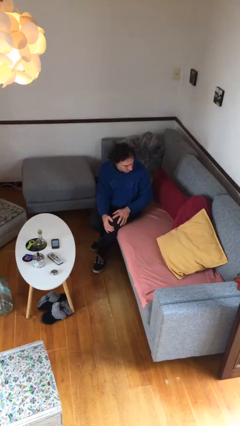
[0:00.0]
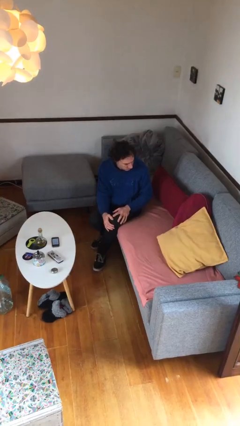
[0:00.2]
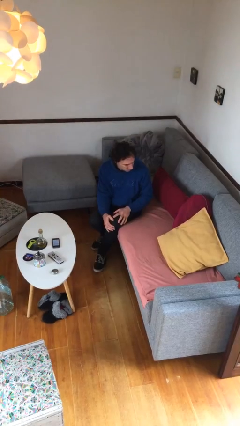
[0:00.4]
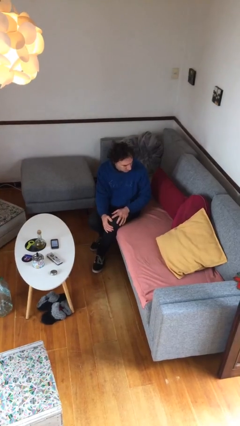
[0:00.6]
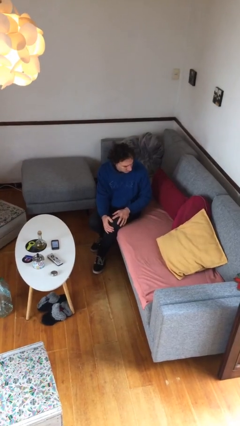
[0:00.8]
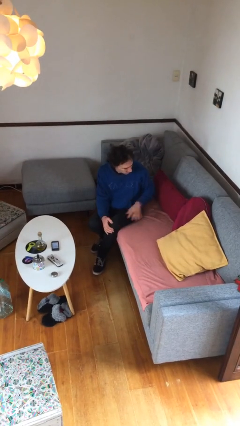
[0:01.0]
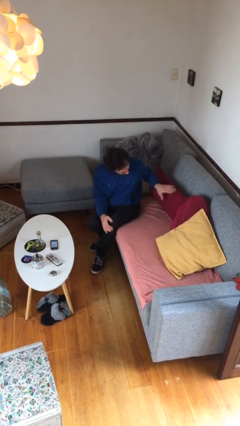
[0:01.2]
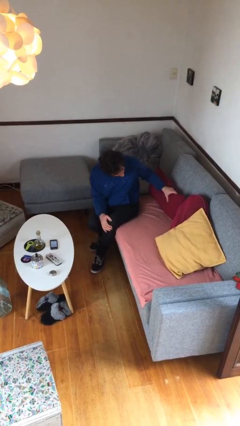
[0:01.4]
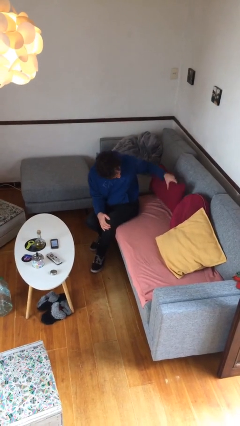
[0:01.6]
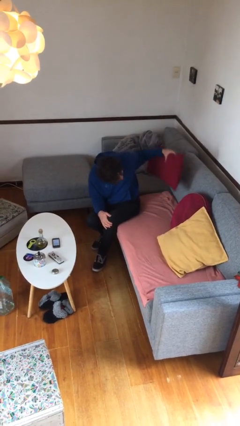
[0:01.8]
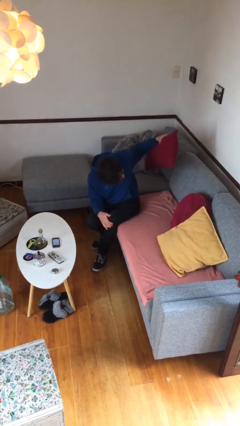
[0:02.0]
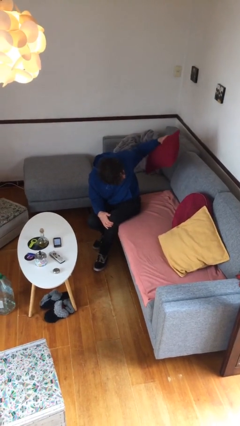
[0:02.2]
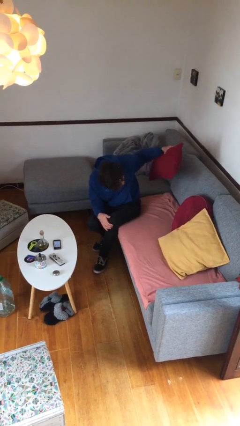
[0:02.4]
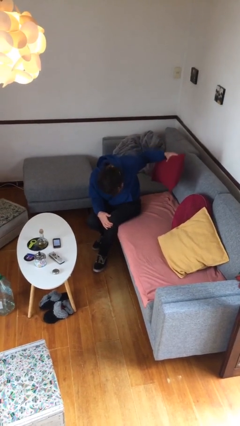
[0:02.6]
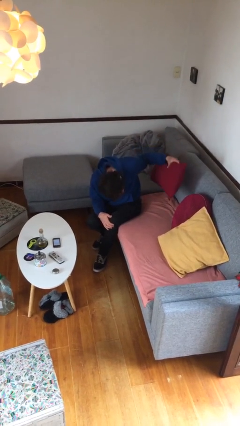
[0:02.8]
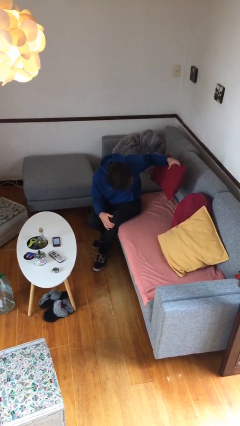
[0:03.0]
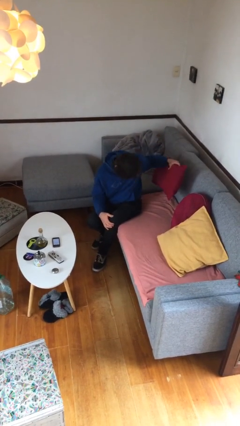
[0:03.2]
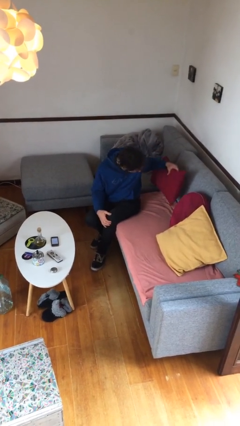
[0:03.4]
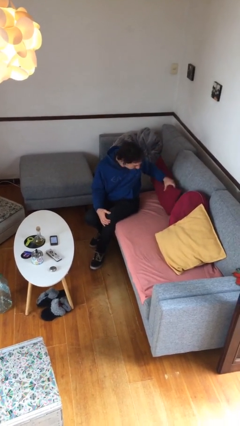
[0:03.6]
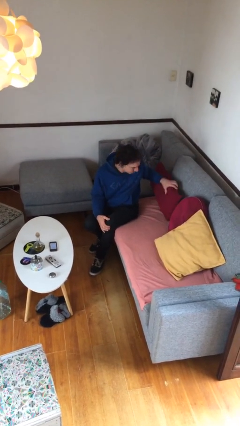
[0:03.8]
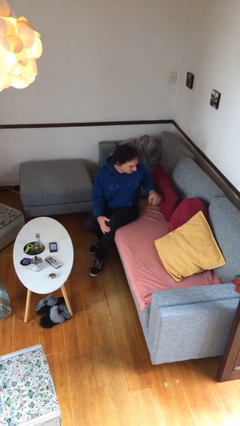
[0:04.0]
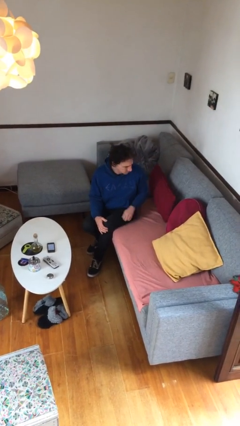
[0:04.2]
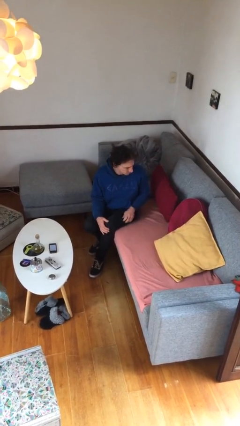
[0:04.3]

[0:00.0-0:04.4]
person searches in couch

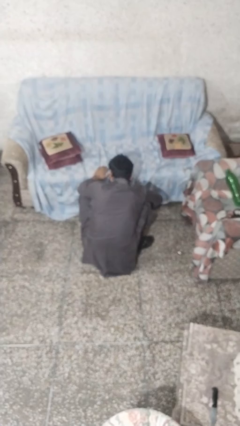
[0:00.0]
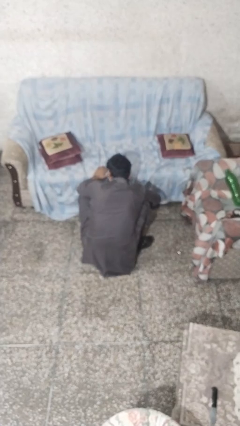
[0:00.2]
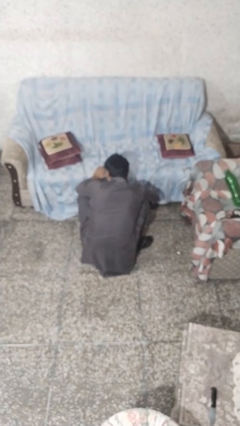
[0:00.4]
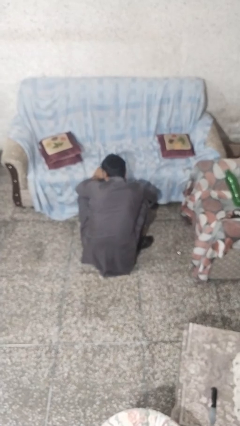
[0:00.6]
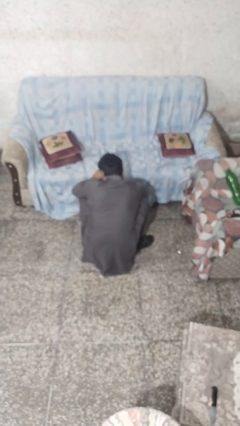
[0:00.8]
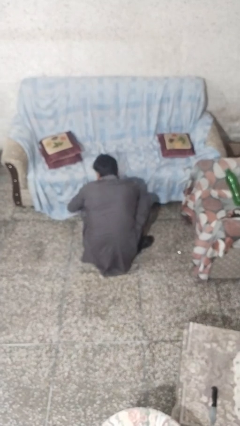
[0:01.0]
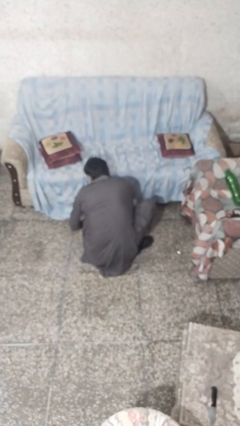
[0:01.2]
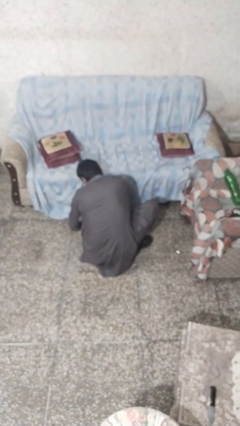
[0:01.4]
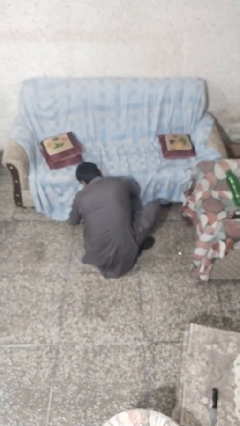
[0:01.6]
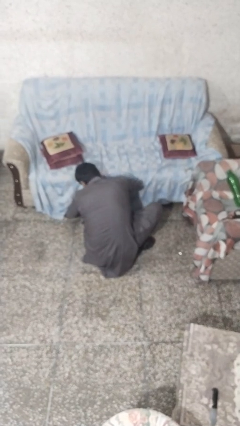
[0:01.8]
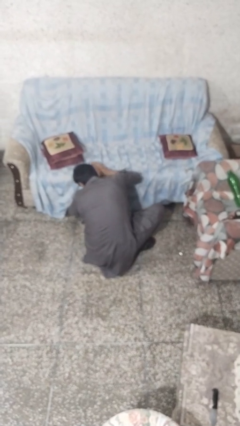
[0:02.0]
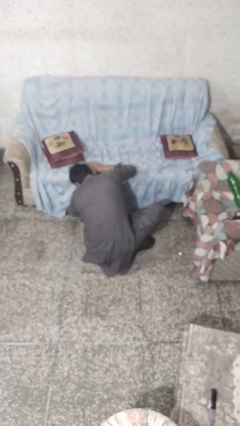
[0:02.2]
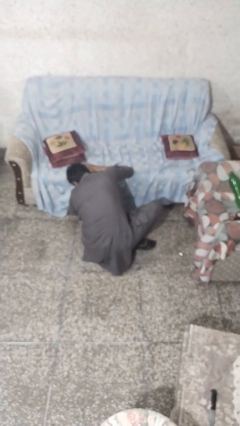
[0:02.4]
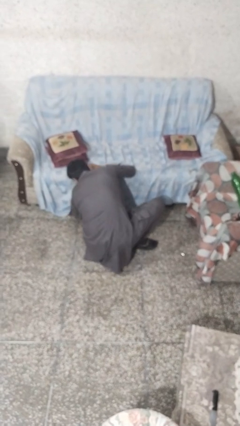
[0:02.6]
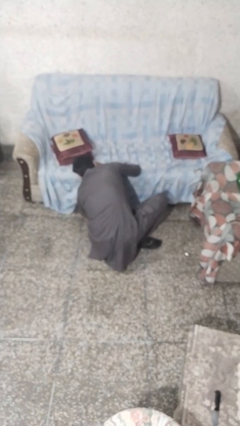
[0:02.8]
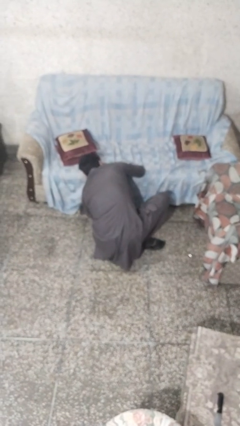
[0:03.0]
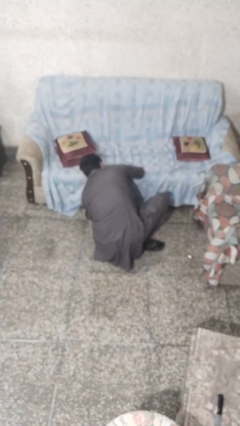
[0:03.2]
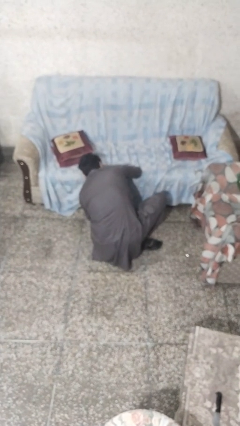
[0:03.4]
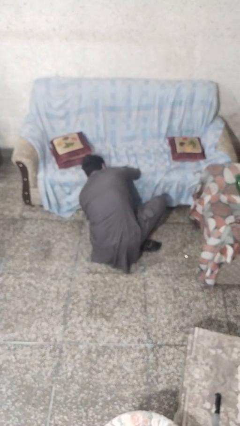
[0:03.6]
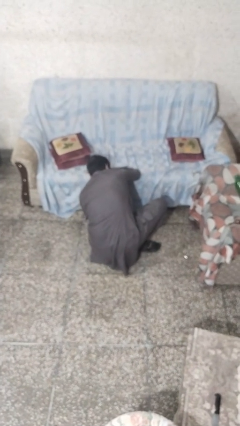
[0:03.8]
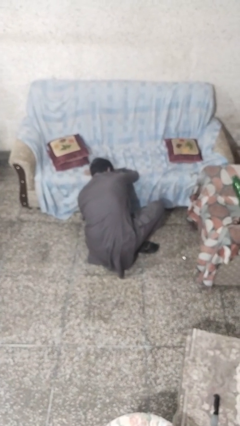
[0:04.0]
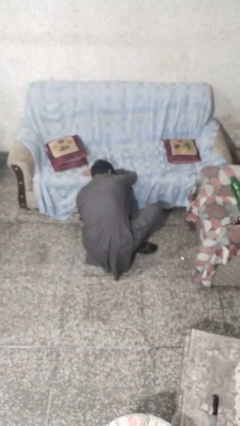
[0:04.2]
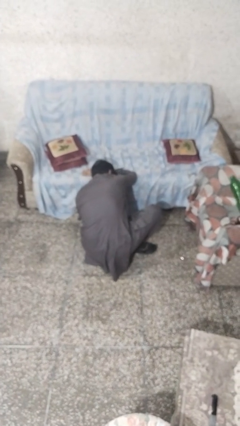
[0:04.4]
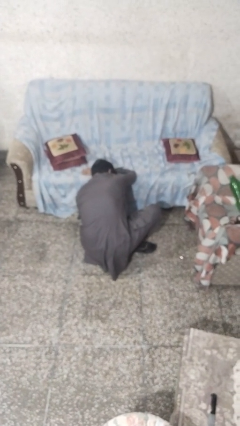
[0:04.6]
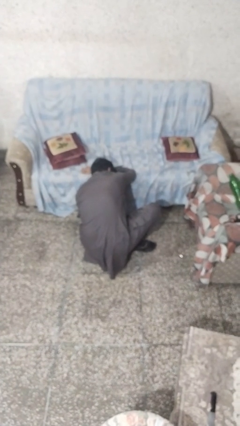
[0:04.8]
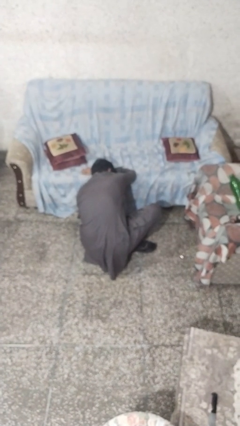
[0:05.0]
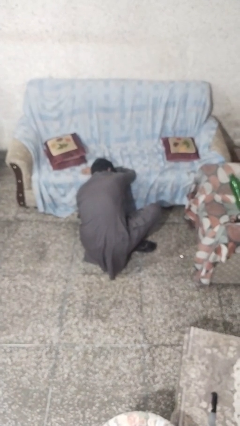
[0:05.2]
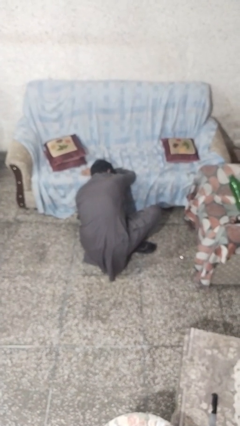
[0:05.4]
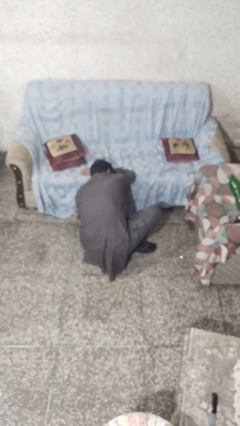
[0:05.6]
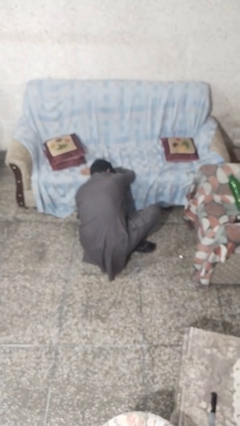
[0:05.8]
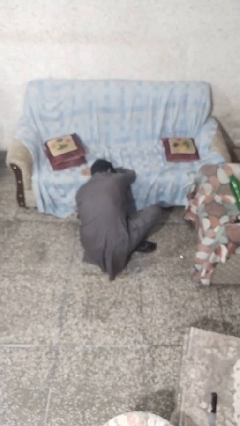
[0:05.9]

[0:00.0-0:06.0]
person searches under couch

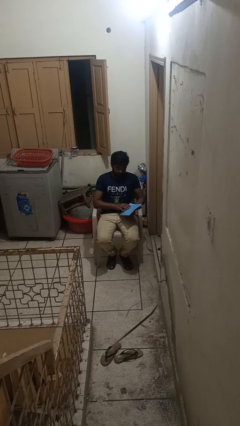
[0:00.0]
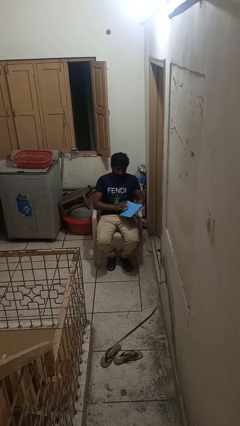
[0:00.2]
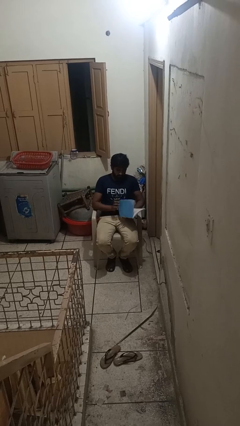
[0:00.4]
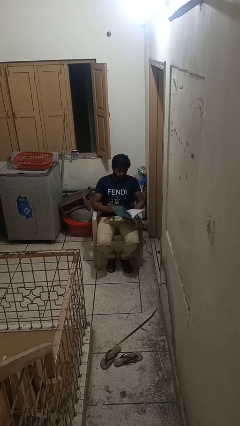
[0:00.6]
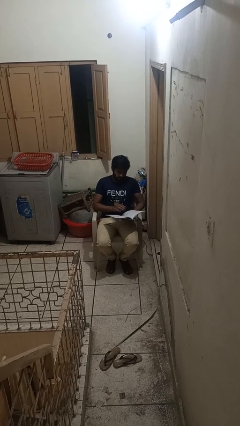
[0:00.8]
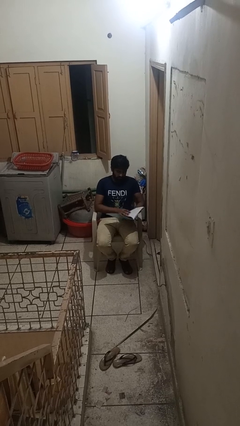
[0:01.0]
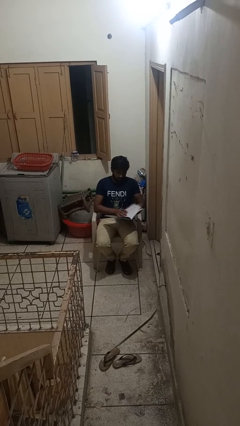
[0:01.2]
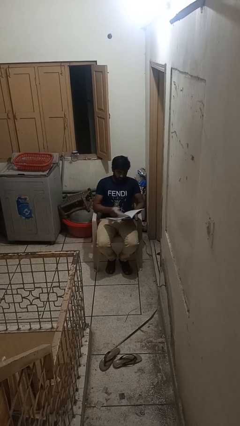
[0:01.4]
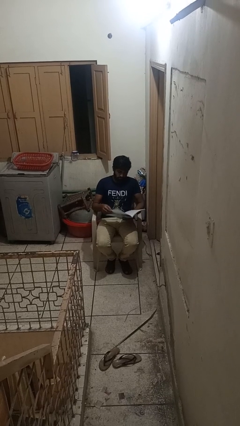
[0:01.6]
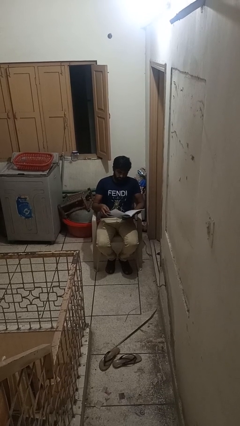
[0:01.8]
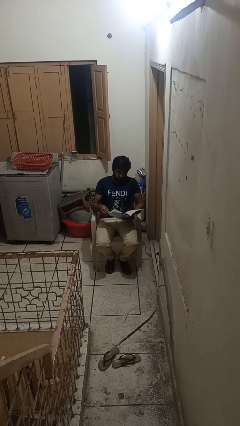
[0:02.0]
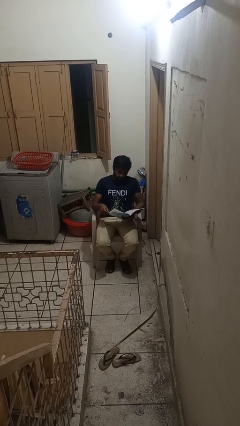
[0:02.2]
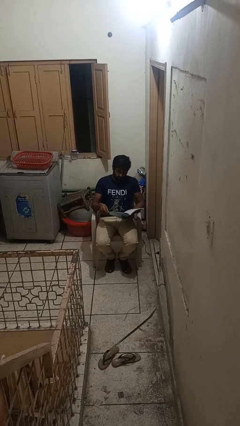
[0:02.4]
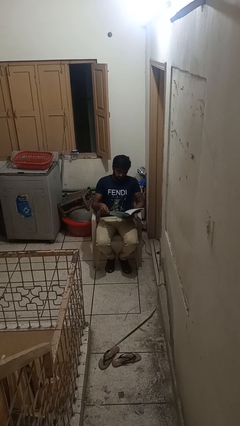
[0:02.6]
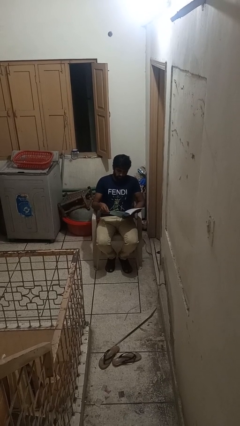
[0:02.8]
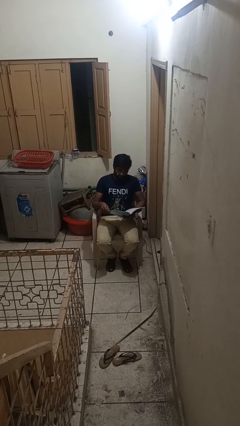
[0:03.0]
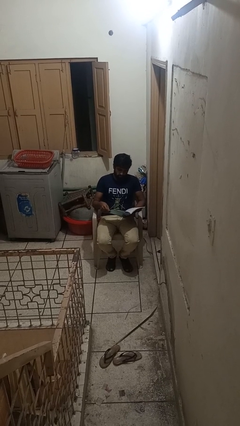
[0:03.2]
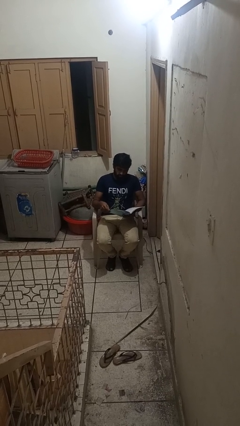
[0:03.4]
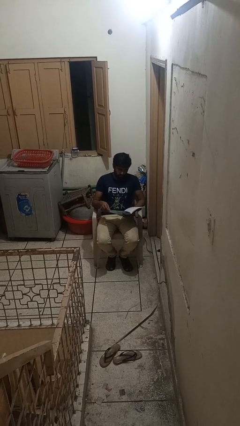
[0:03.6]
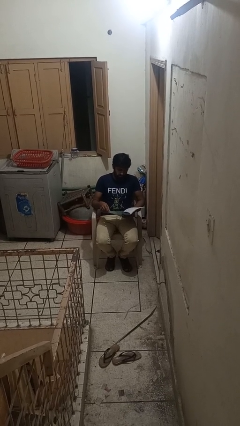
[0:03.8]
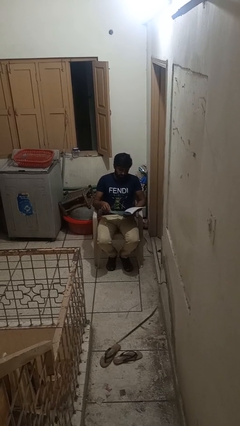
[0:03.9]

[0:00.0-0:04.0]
person reads book

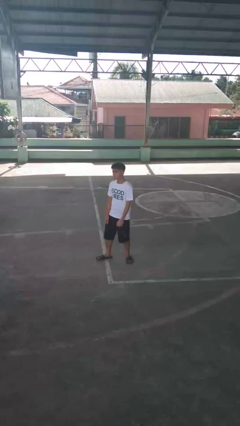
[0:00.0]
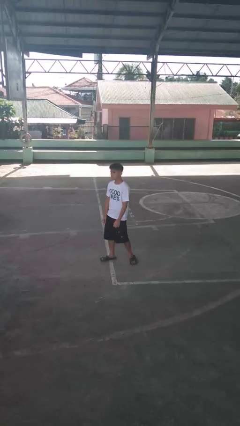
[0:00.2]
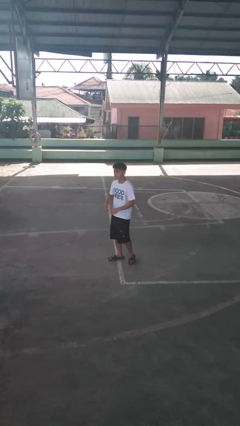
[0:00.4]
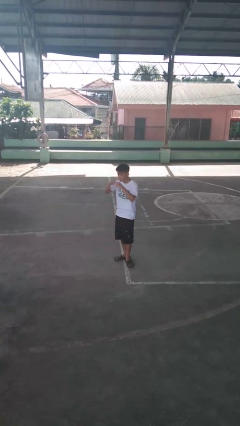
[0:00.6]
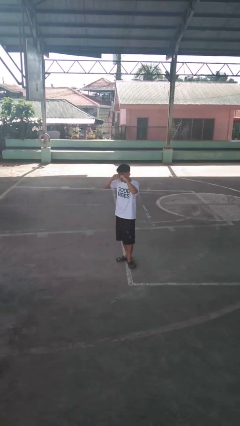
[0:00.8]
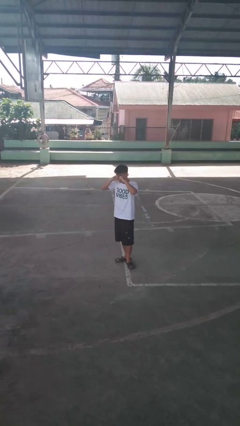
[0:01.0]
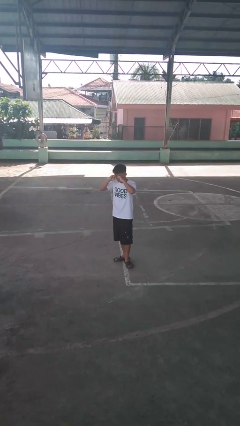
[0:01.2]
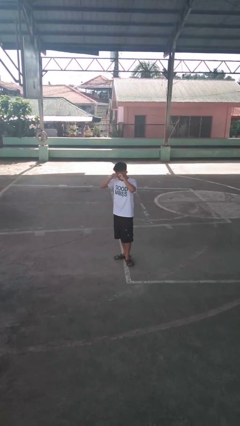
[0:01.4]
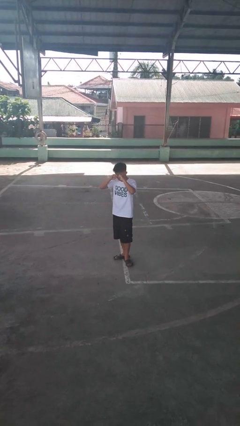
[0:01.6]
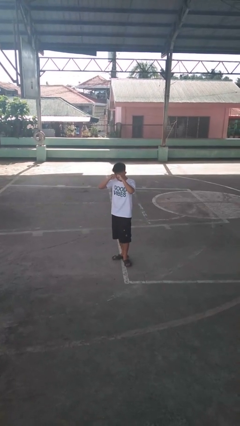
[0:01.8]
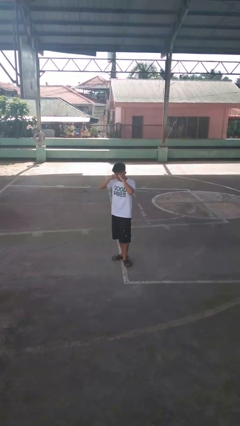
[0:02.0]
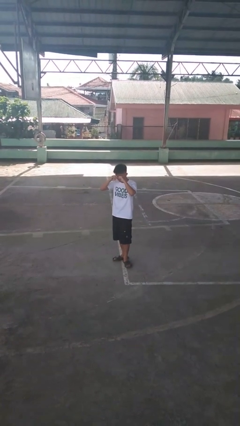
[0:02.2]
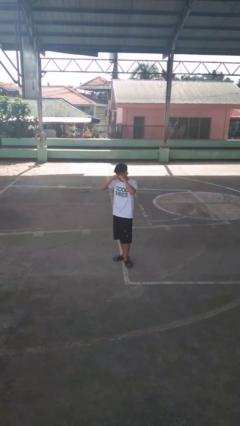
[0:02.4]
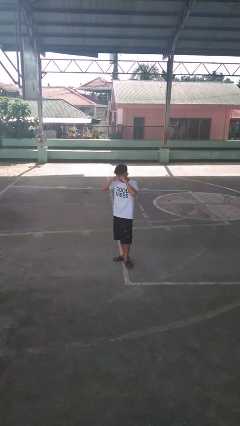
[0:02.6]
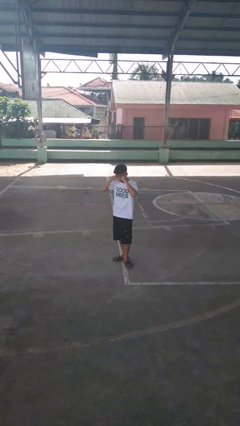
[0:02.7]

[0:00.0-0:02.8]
person rubs eyes

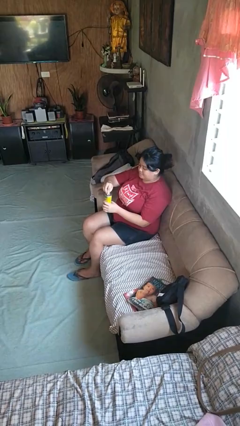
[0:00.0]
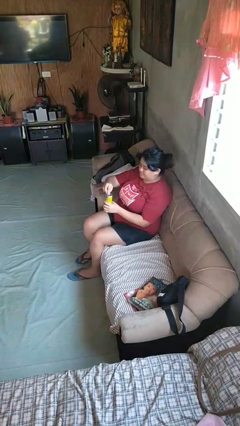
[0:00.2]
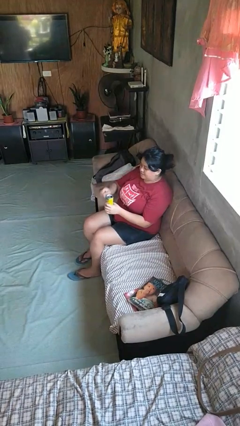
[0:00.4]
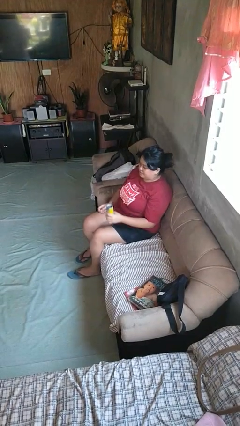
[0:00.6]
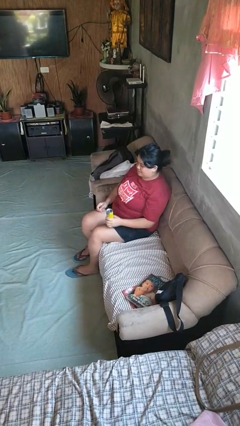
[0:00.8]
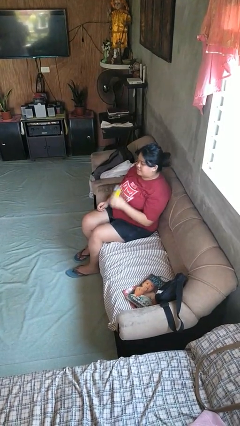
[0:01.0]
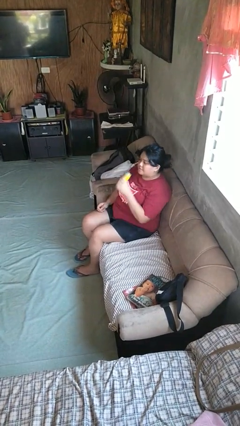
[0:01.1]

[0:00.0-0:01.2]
person drinks from beverage can
